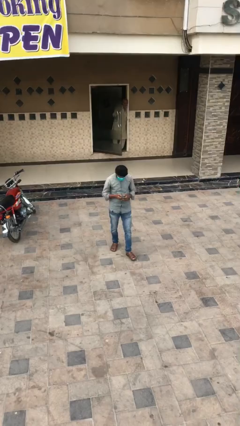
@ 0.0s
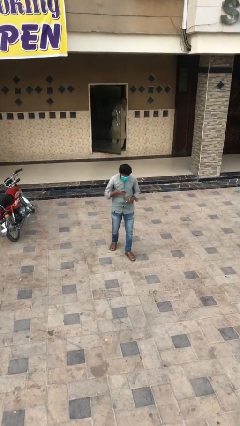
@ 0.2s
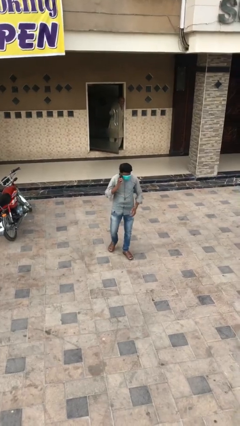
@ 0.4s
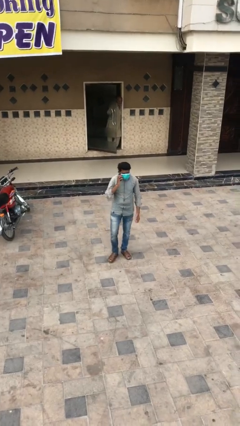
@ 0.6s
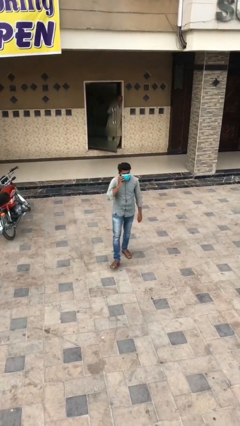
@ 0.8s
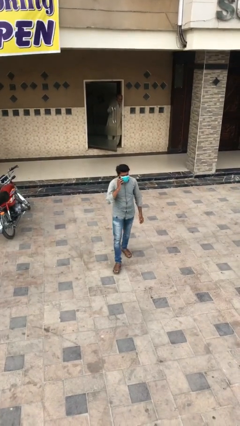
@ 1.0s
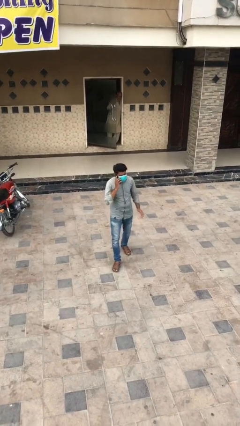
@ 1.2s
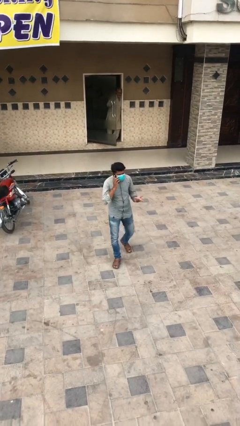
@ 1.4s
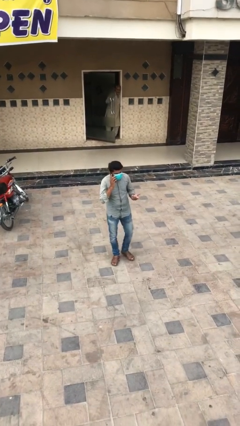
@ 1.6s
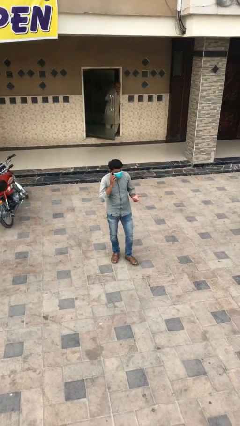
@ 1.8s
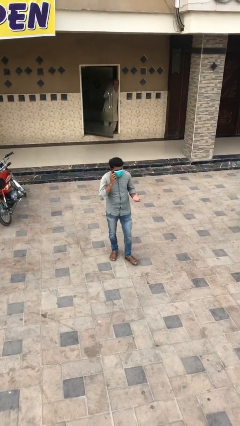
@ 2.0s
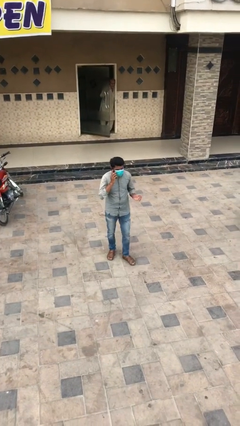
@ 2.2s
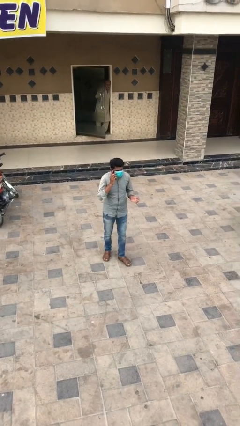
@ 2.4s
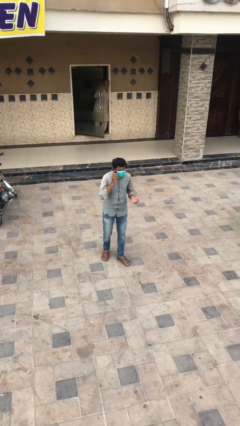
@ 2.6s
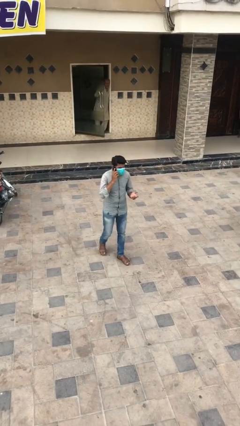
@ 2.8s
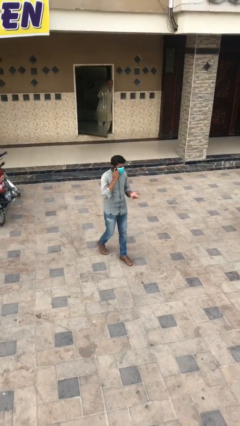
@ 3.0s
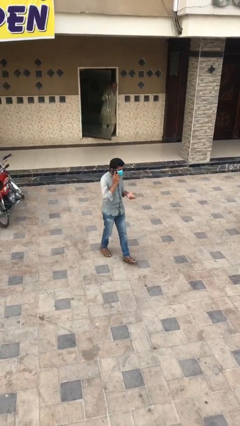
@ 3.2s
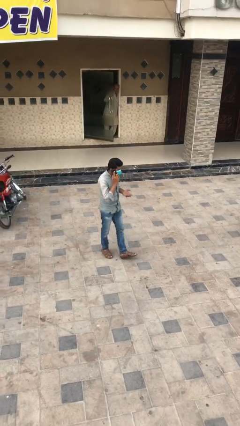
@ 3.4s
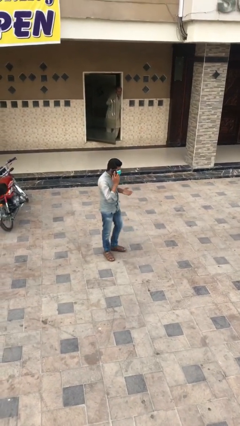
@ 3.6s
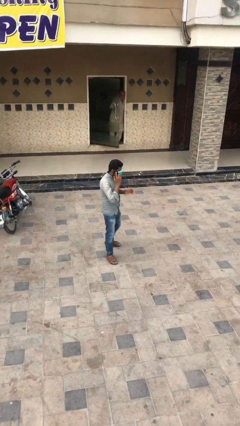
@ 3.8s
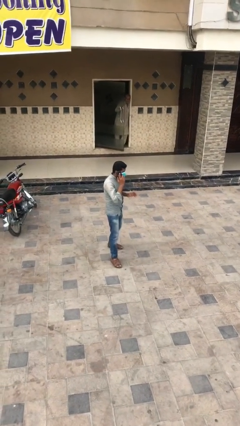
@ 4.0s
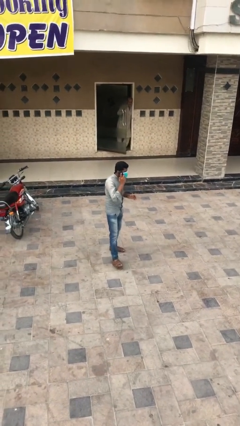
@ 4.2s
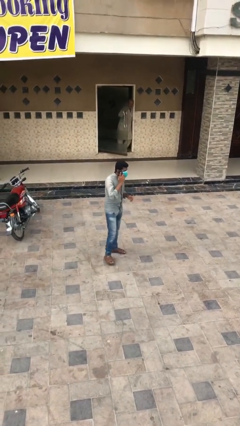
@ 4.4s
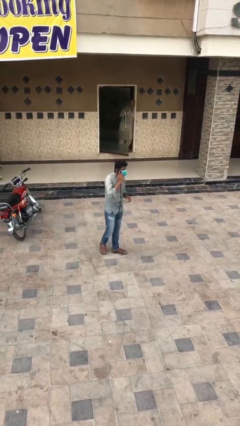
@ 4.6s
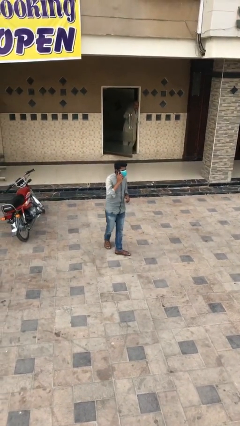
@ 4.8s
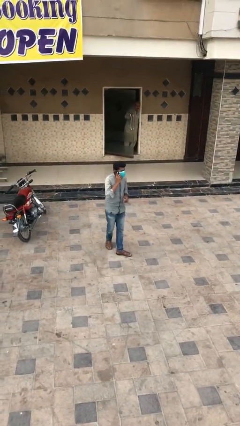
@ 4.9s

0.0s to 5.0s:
person talks on phone

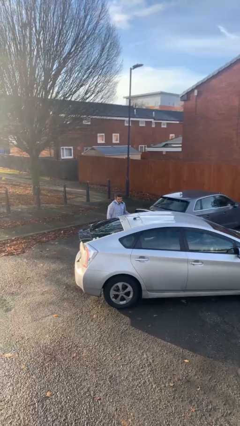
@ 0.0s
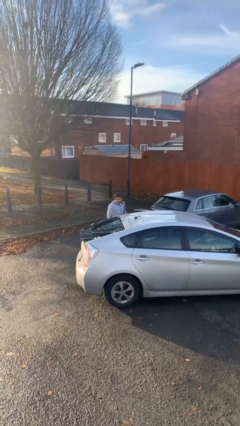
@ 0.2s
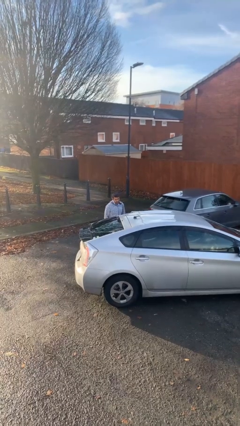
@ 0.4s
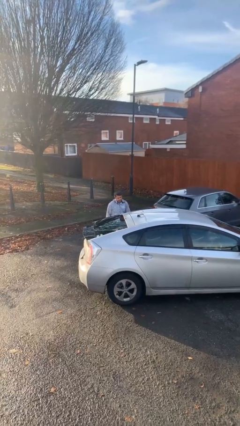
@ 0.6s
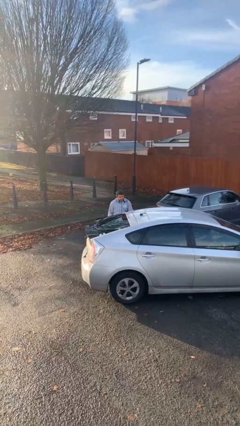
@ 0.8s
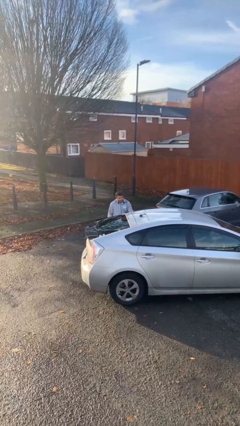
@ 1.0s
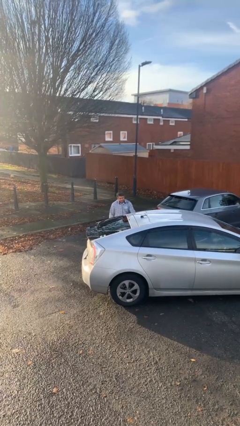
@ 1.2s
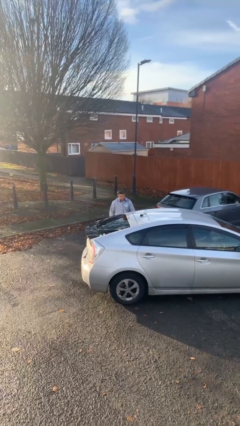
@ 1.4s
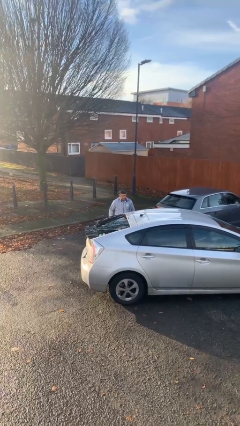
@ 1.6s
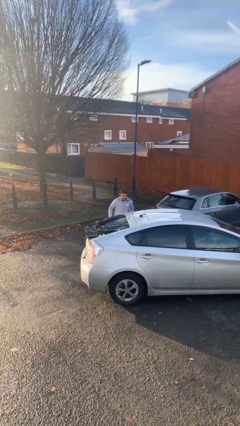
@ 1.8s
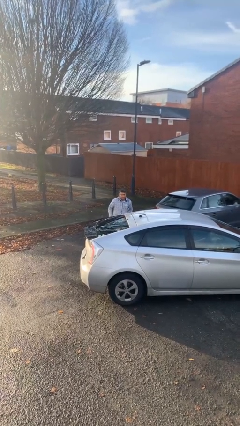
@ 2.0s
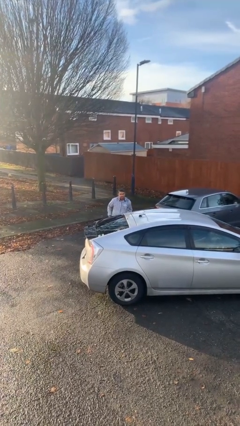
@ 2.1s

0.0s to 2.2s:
person closes car door

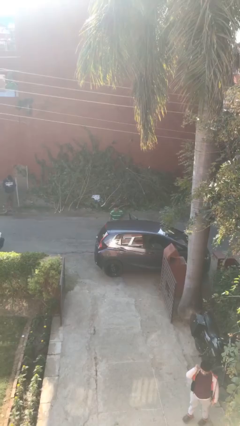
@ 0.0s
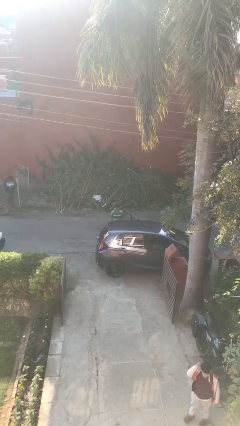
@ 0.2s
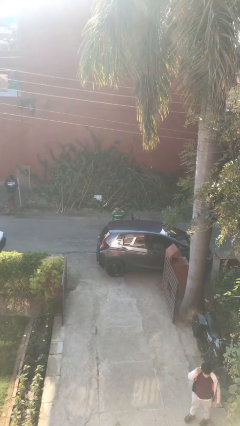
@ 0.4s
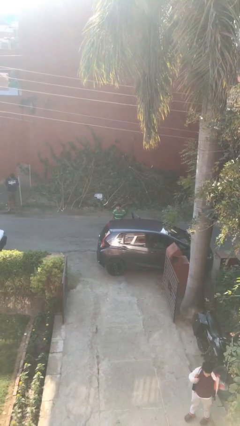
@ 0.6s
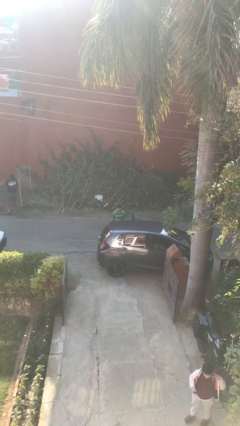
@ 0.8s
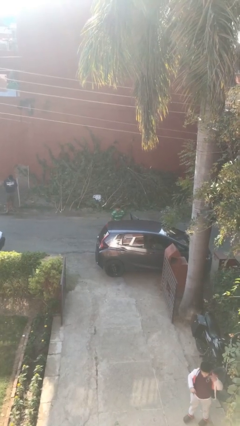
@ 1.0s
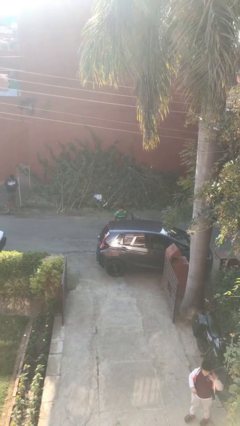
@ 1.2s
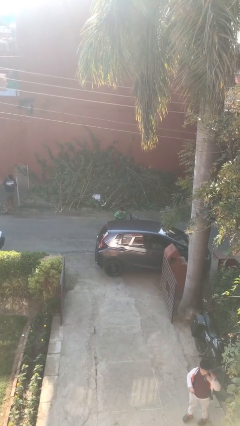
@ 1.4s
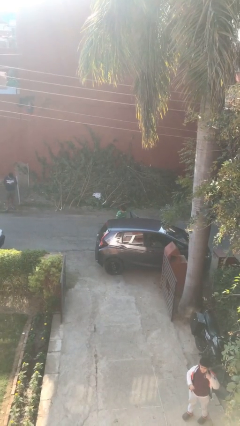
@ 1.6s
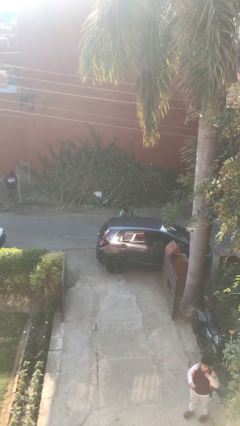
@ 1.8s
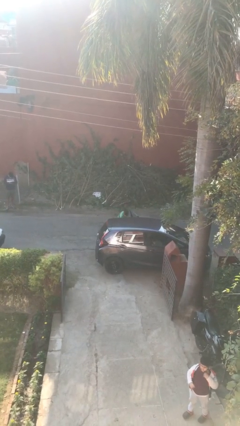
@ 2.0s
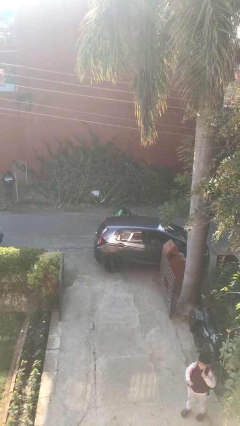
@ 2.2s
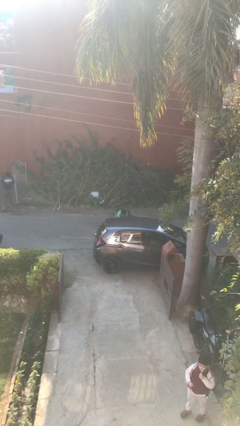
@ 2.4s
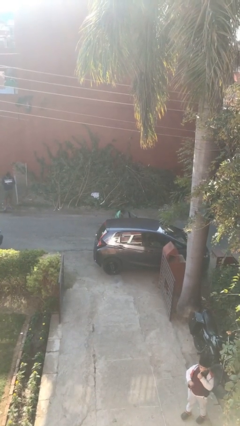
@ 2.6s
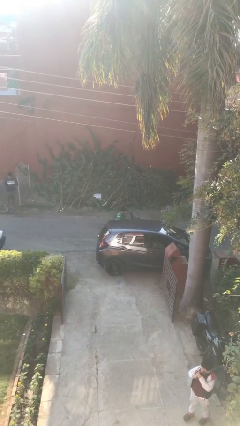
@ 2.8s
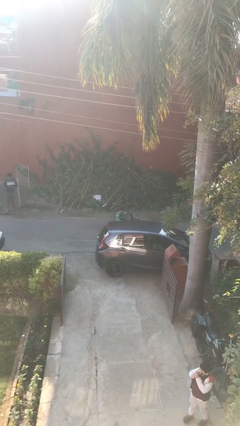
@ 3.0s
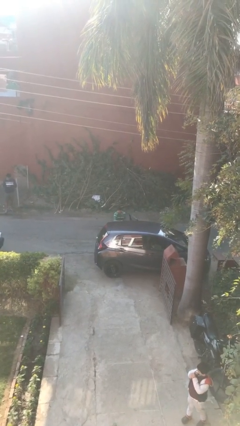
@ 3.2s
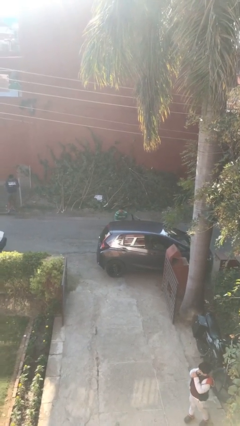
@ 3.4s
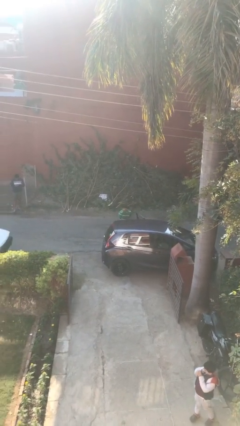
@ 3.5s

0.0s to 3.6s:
person unloads car

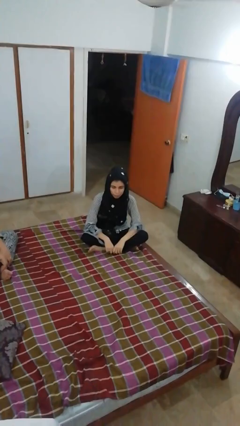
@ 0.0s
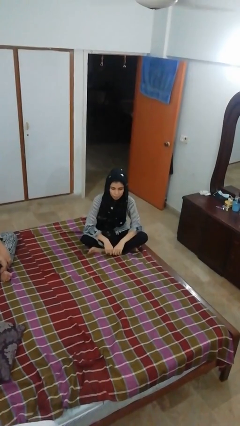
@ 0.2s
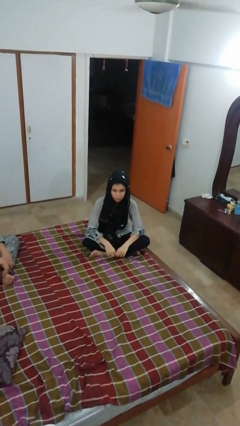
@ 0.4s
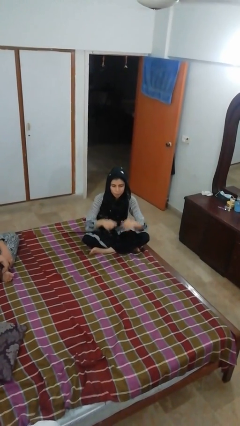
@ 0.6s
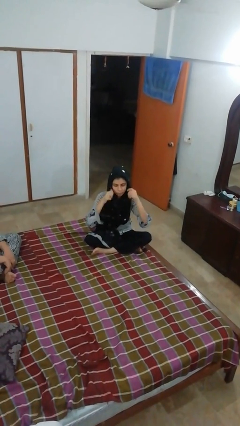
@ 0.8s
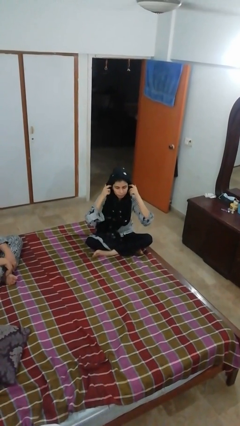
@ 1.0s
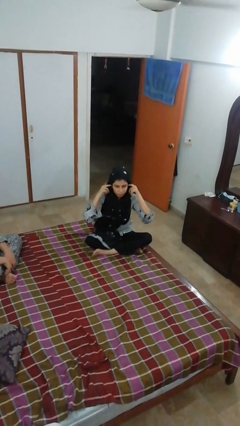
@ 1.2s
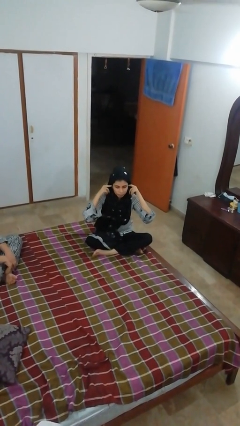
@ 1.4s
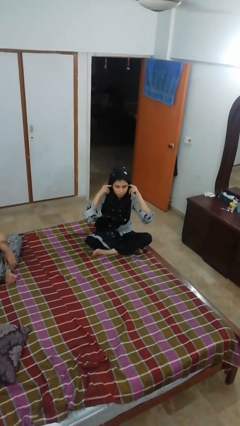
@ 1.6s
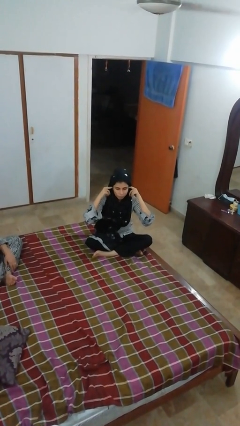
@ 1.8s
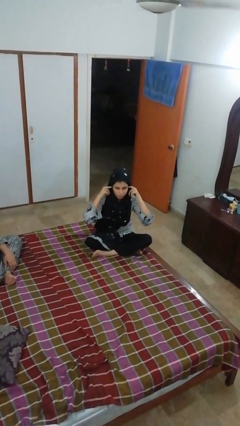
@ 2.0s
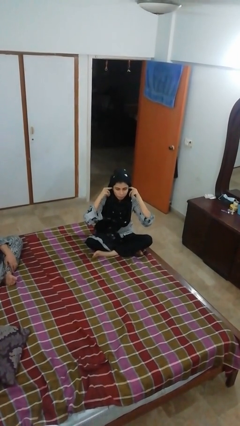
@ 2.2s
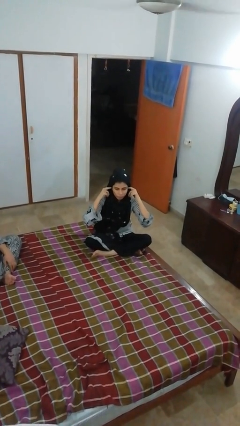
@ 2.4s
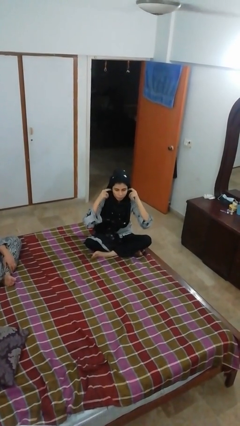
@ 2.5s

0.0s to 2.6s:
person puts fingers in ear

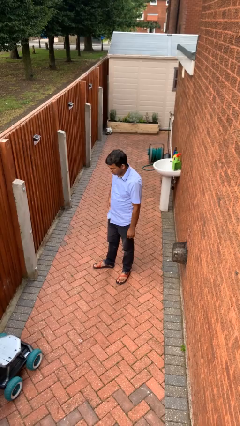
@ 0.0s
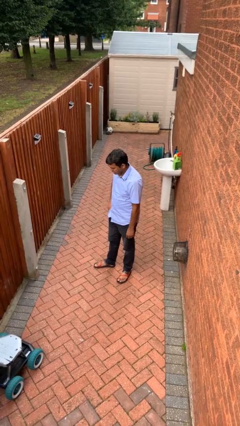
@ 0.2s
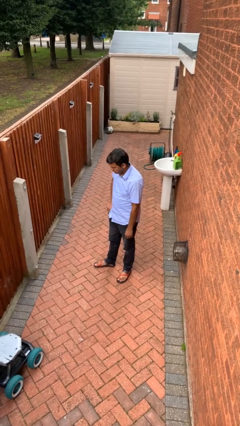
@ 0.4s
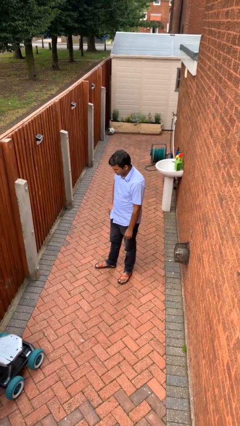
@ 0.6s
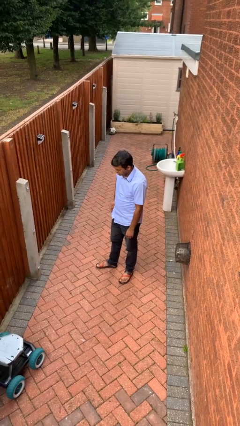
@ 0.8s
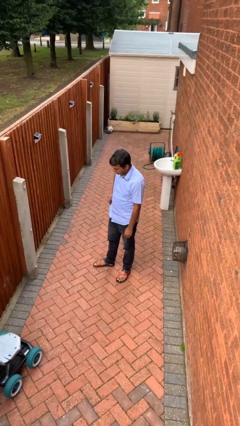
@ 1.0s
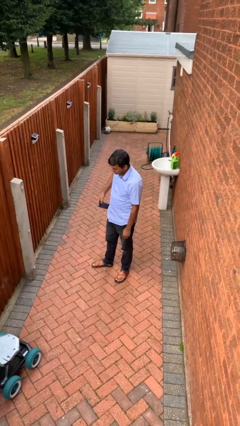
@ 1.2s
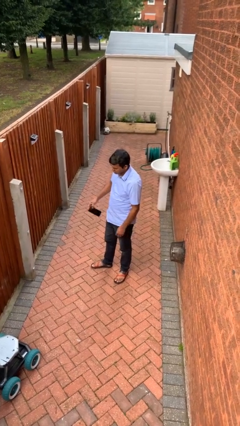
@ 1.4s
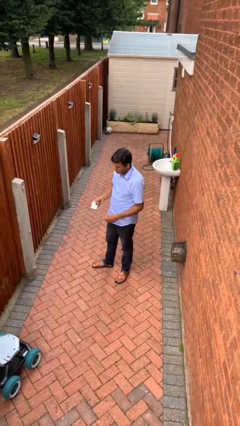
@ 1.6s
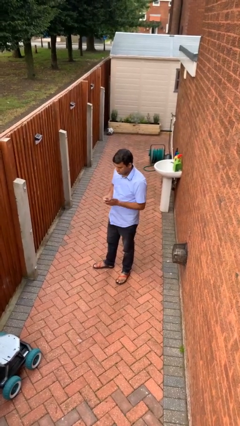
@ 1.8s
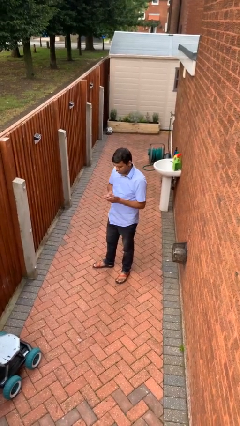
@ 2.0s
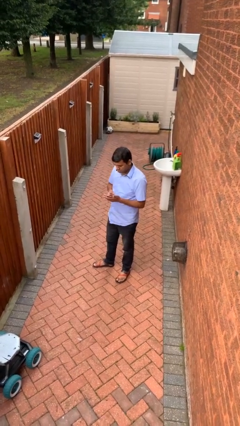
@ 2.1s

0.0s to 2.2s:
person takes phone from pocket

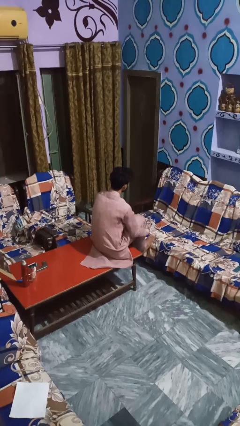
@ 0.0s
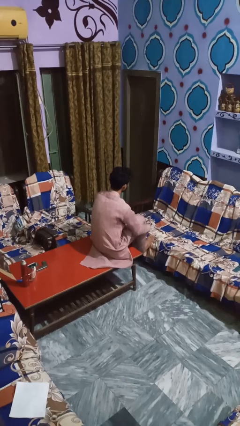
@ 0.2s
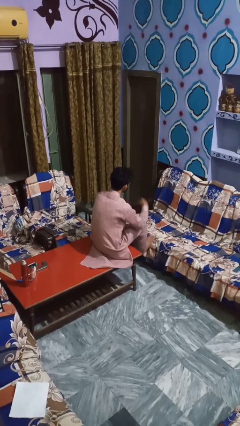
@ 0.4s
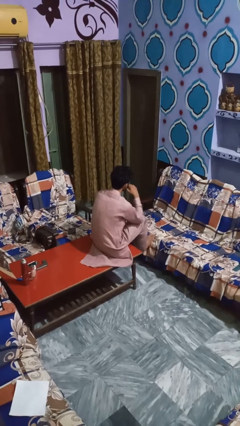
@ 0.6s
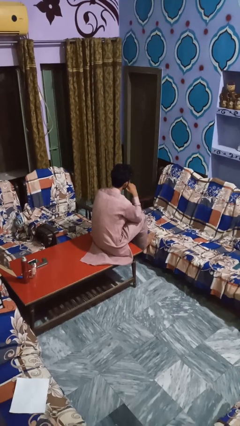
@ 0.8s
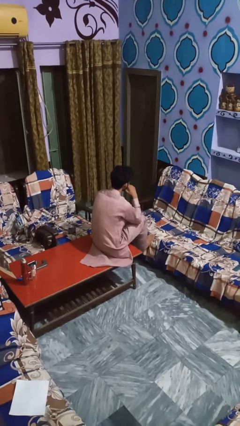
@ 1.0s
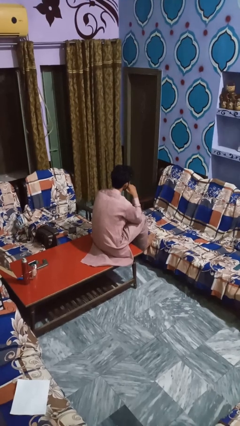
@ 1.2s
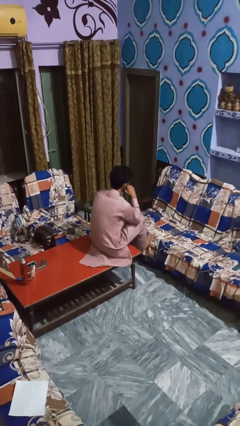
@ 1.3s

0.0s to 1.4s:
person licks fingers

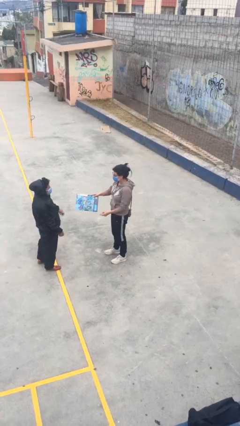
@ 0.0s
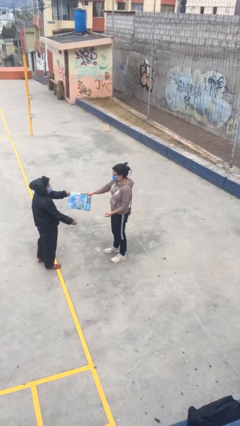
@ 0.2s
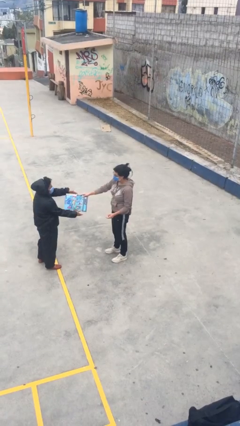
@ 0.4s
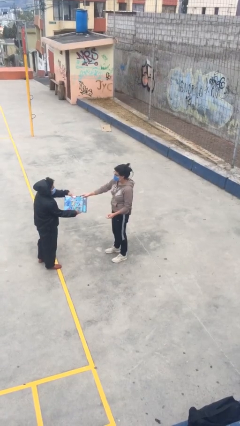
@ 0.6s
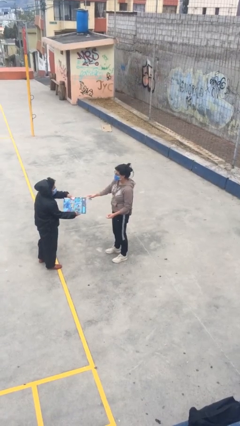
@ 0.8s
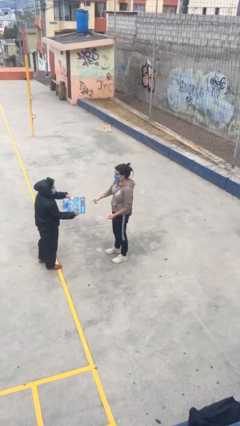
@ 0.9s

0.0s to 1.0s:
person transfers object to person
